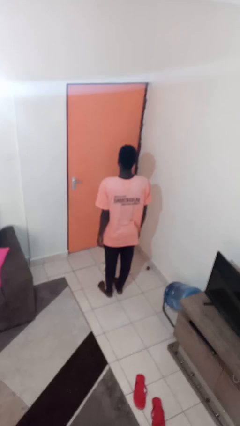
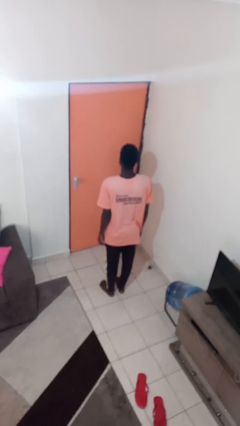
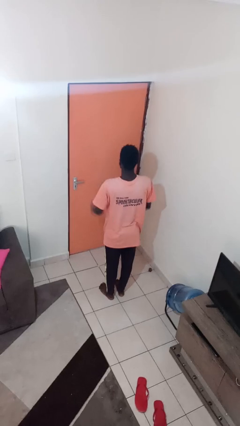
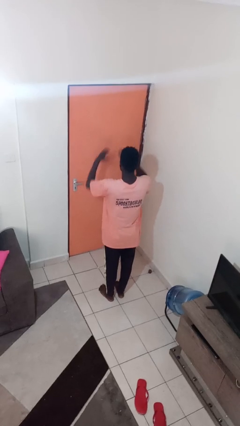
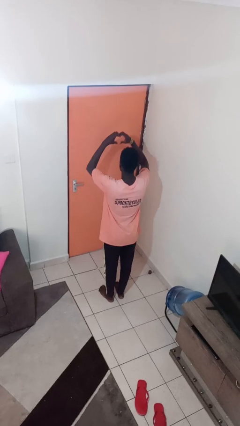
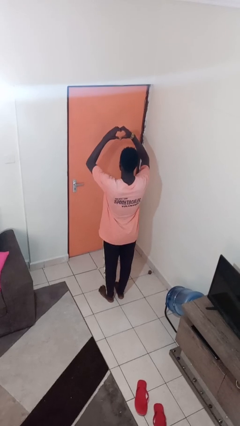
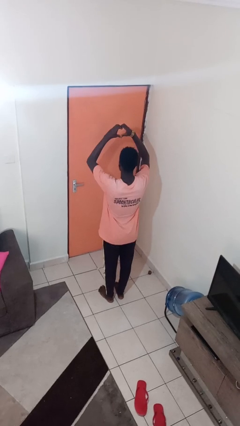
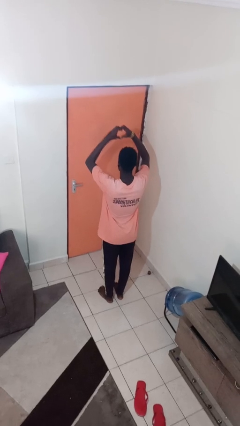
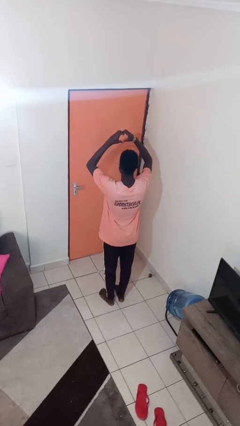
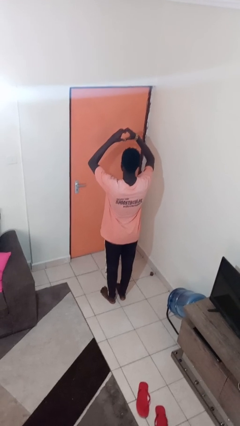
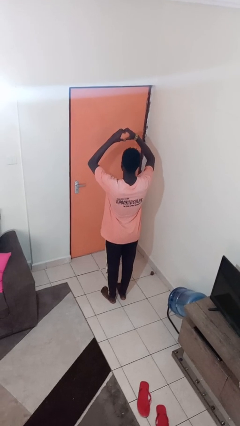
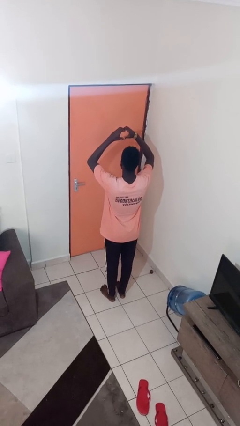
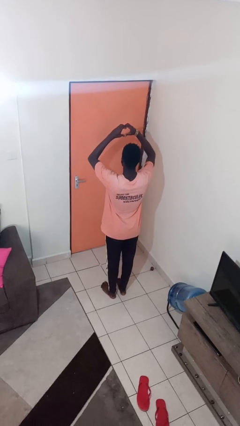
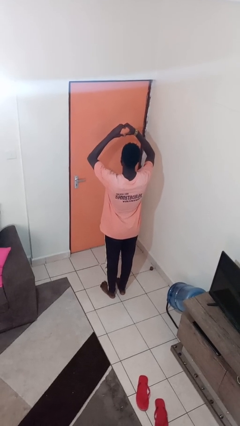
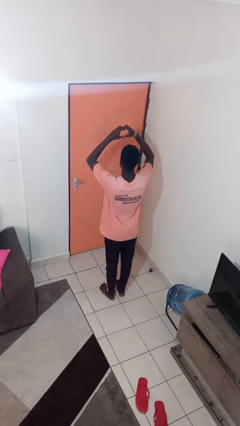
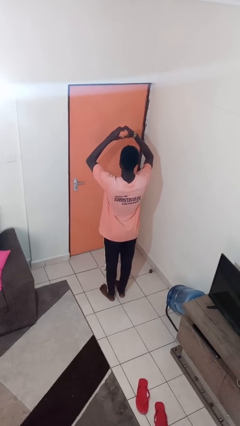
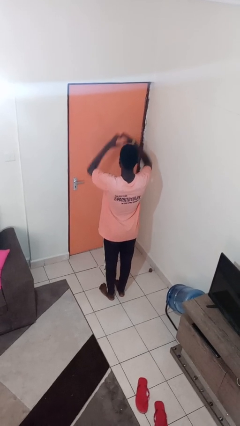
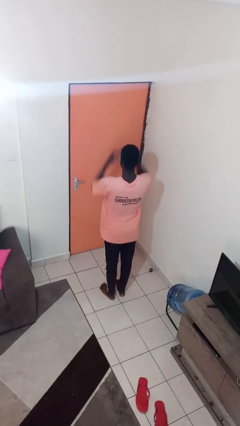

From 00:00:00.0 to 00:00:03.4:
person gestures heart

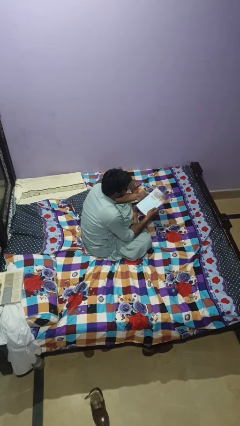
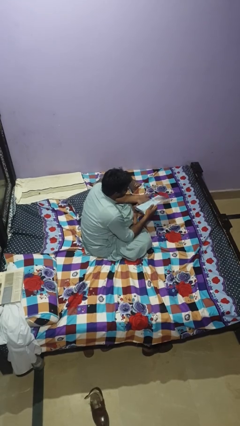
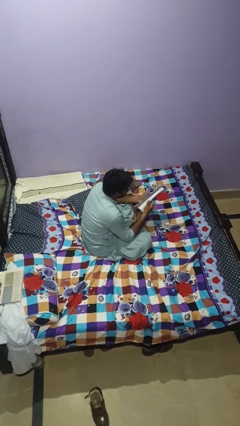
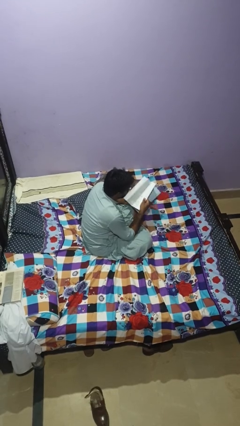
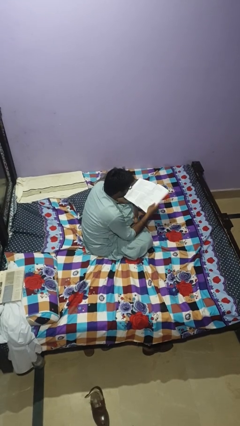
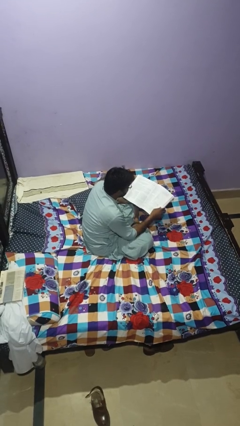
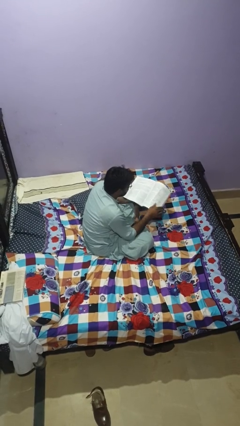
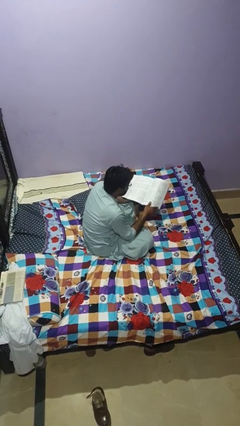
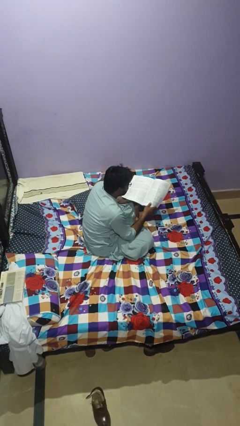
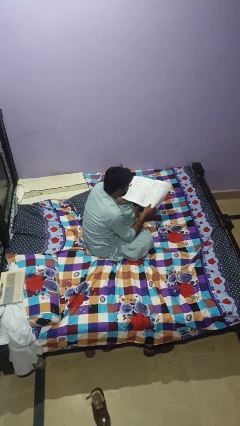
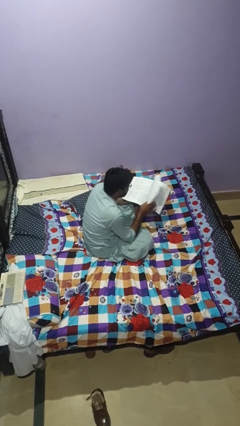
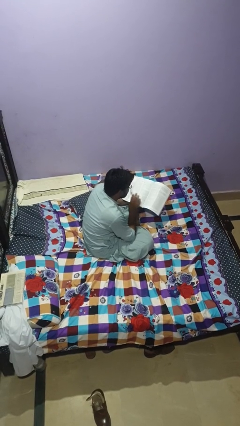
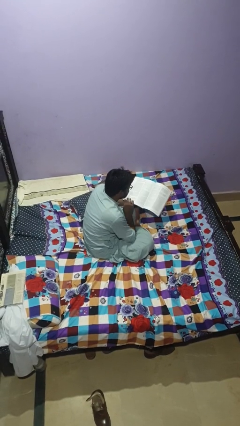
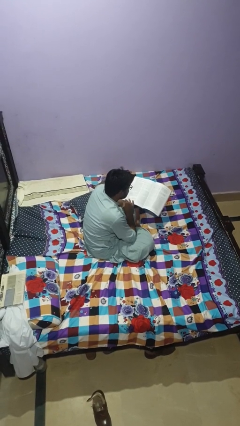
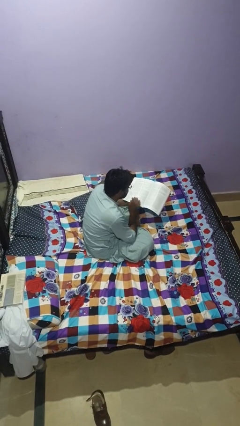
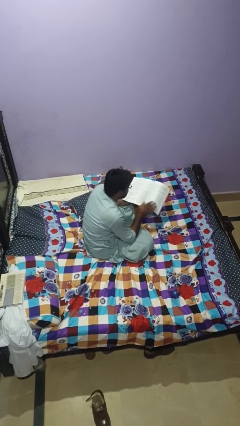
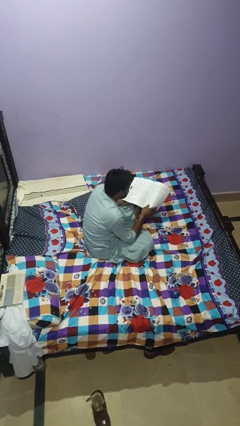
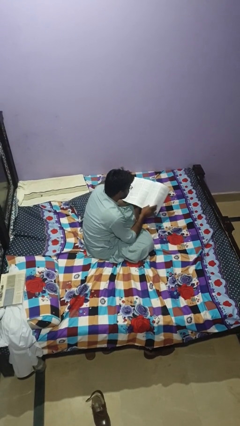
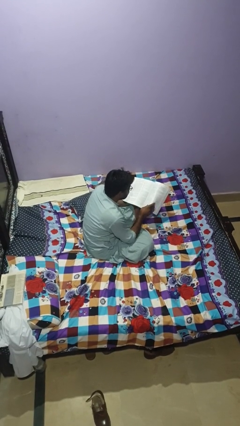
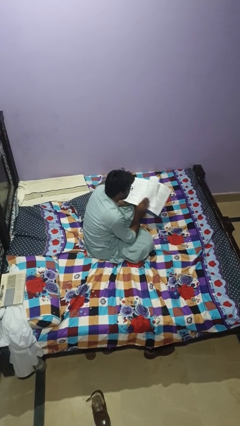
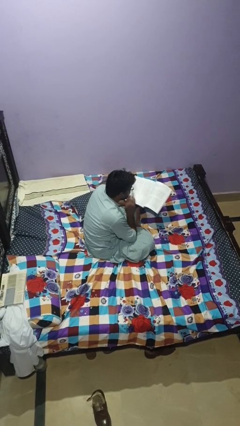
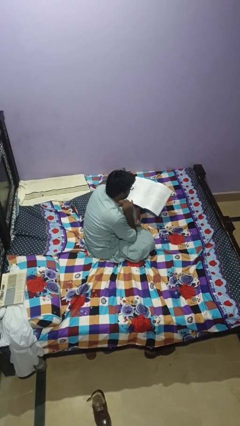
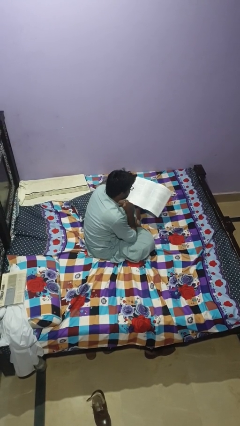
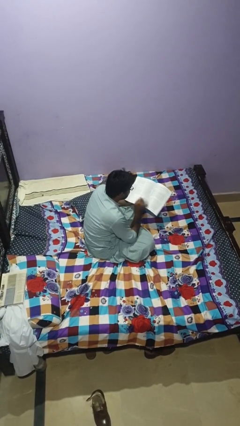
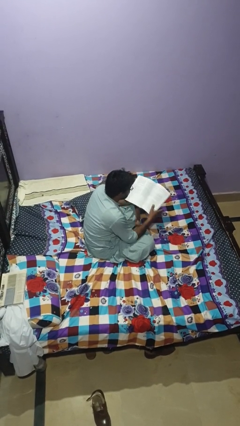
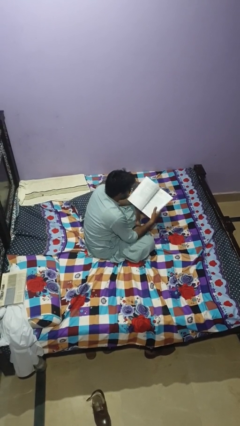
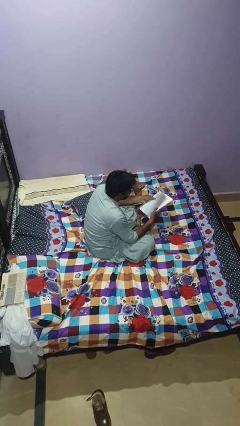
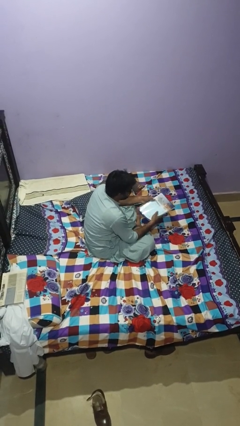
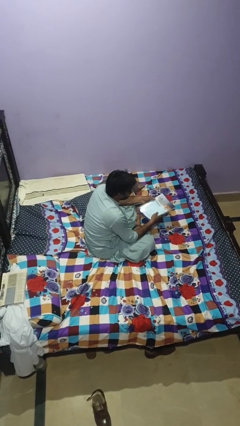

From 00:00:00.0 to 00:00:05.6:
person reads magazine

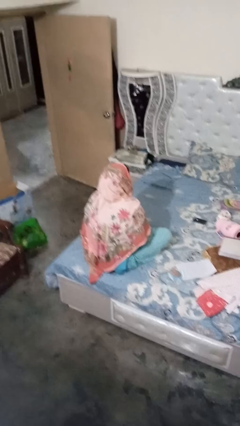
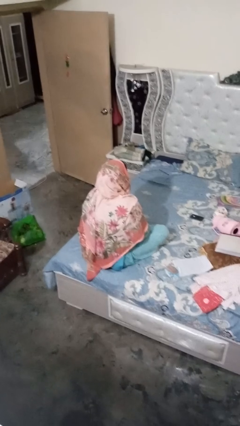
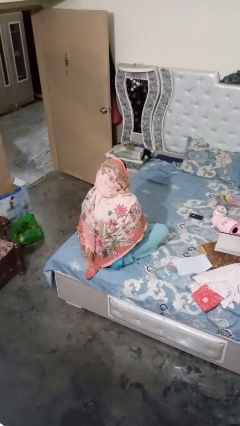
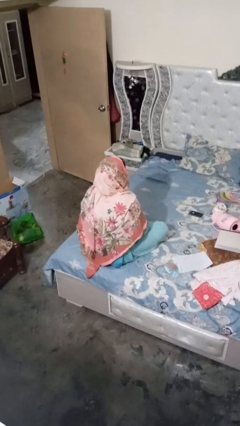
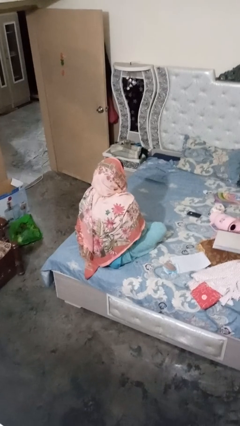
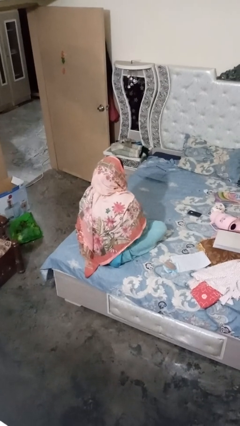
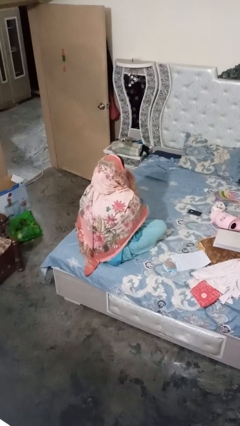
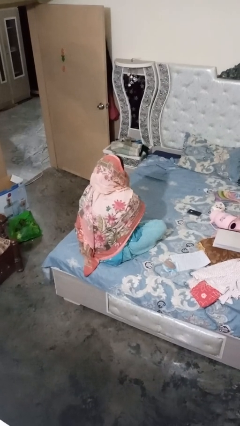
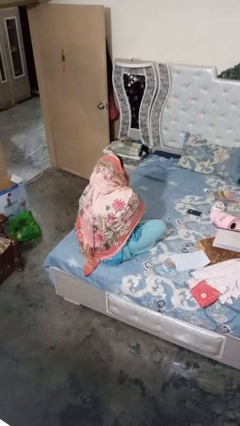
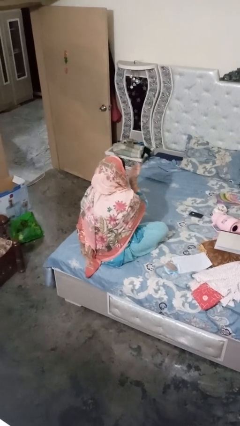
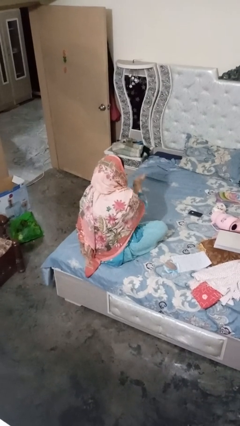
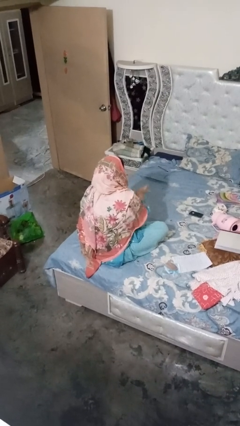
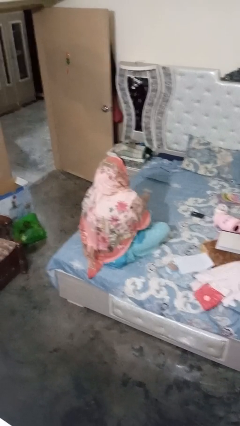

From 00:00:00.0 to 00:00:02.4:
person gestures blow kiss

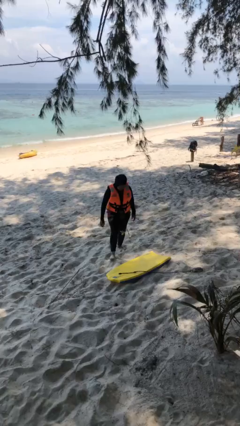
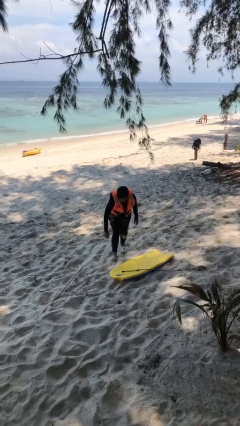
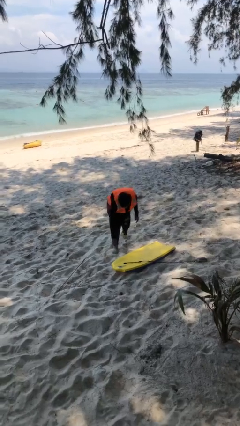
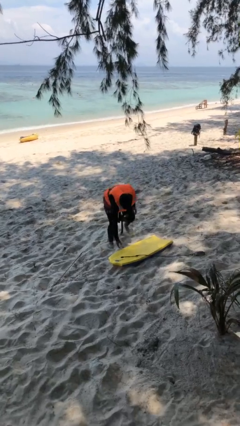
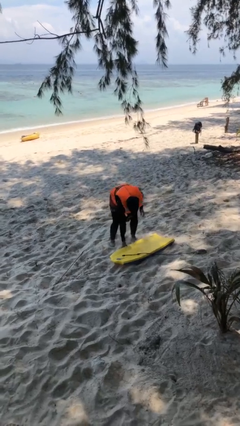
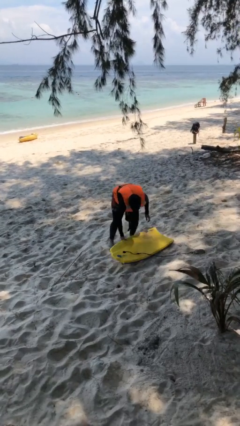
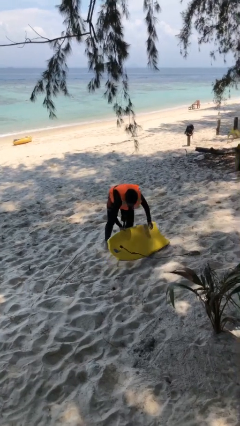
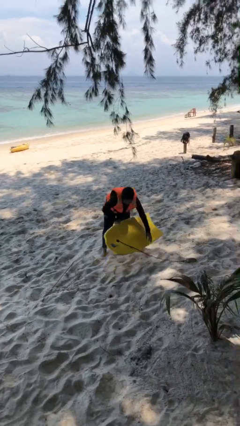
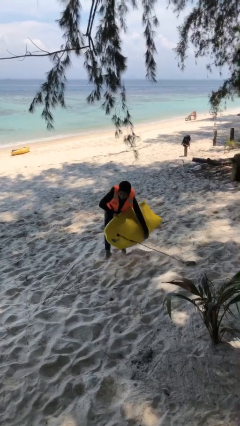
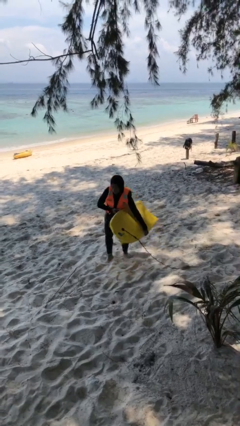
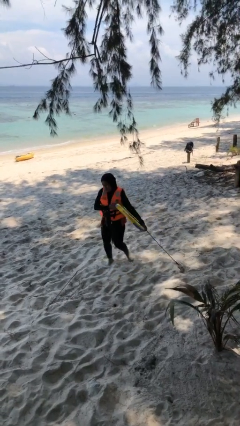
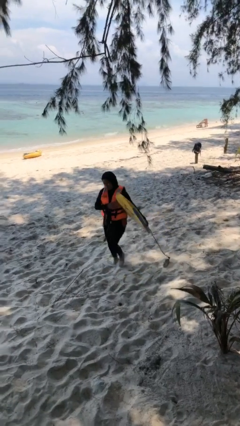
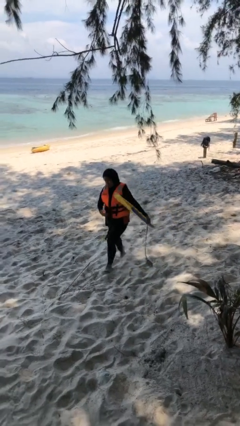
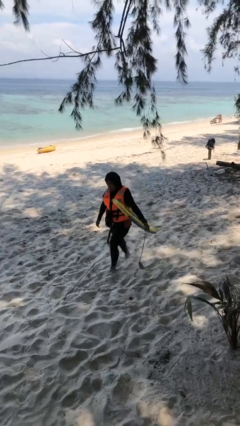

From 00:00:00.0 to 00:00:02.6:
person picks up object from floor

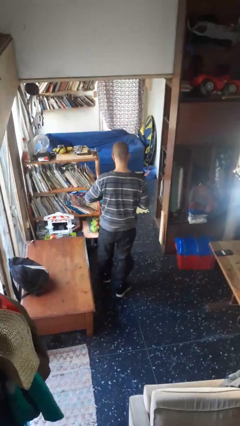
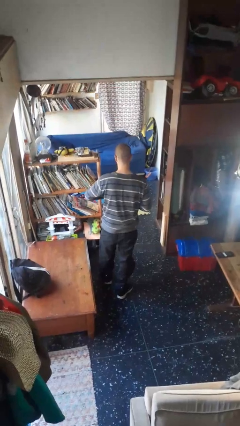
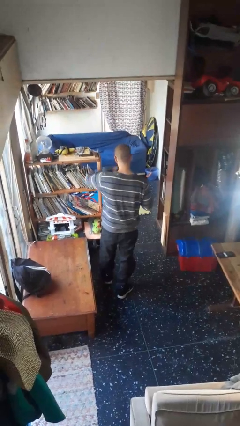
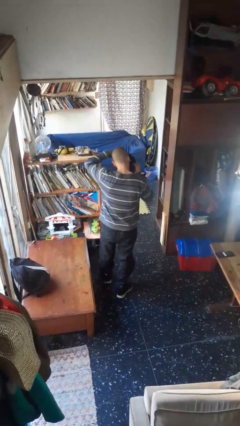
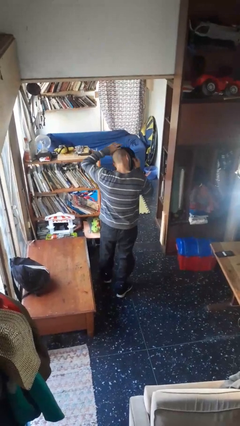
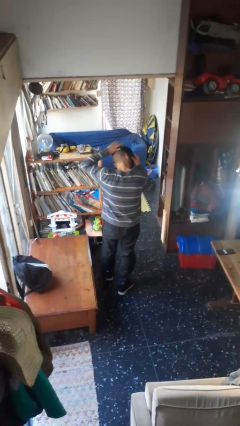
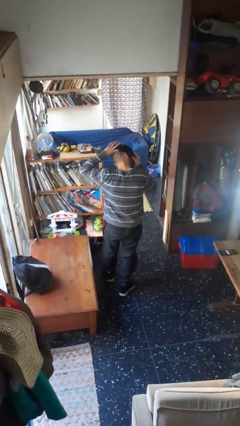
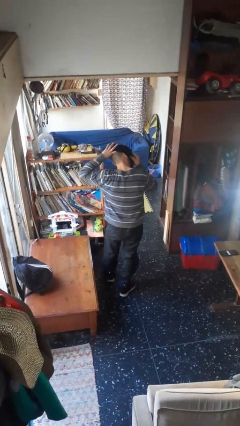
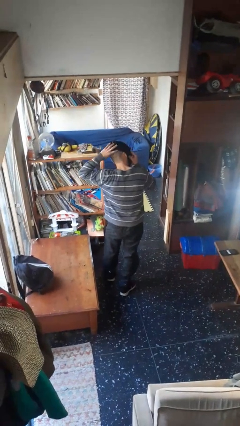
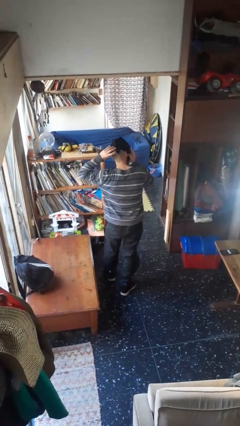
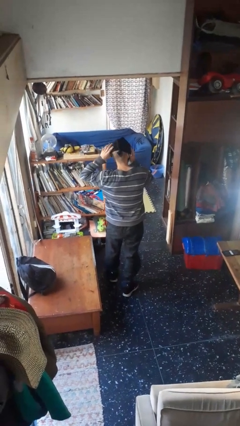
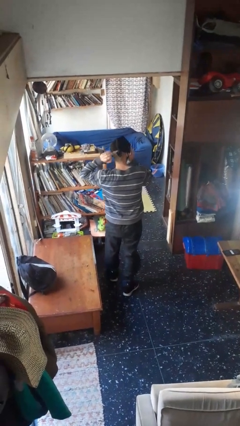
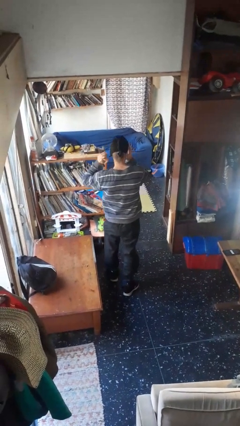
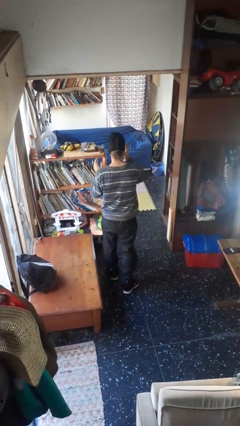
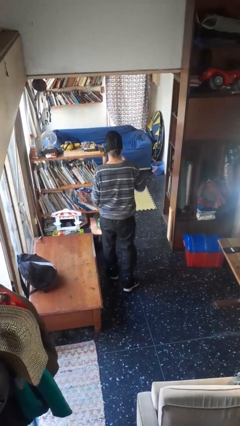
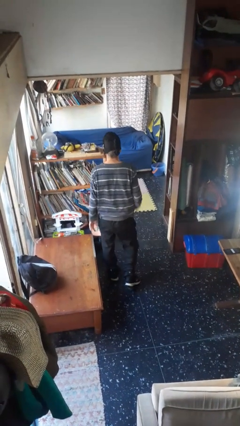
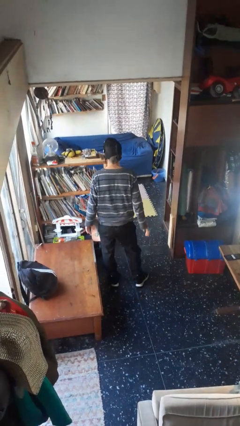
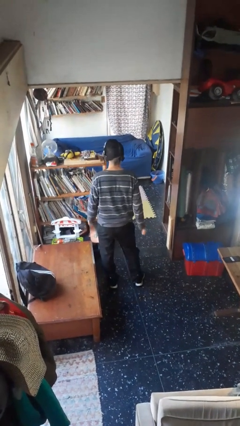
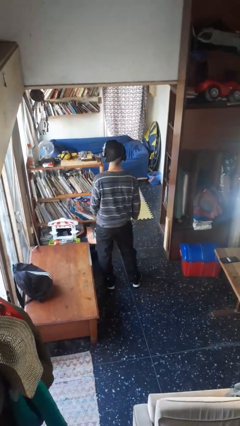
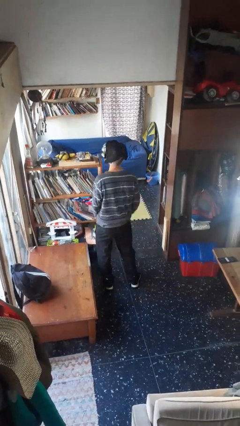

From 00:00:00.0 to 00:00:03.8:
person puts on facemask
